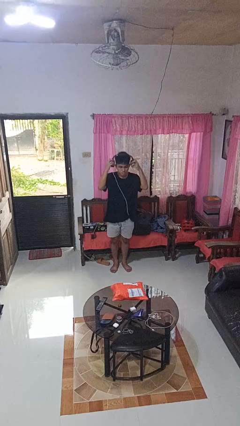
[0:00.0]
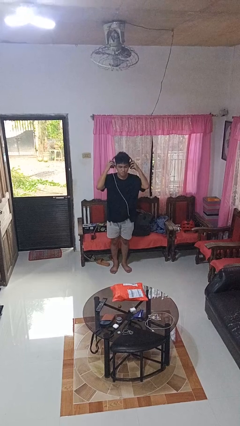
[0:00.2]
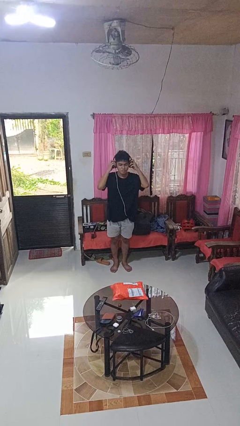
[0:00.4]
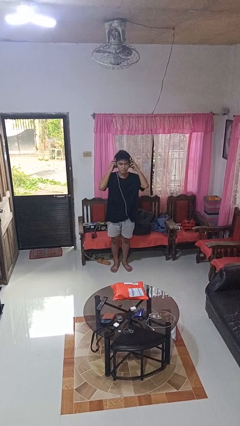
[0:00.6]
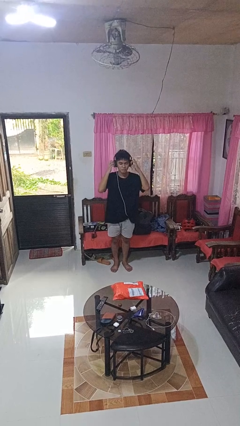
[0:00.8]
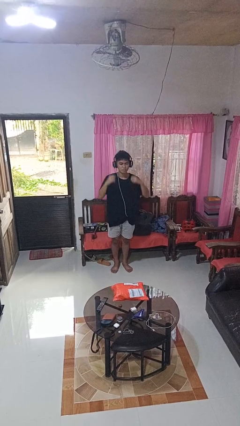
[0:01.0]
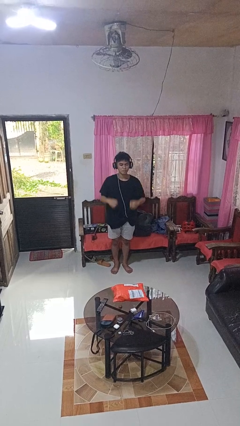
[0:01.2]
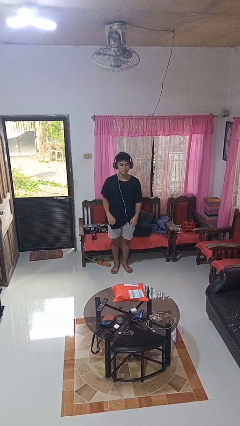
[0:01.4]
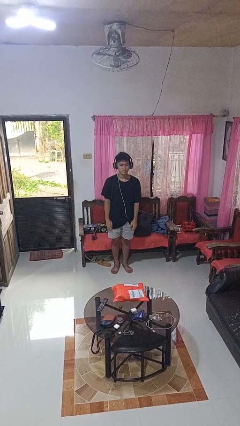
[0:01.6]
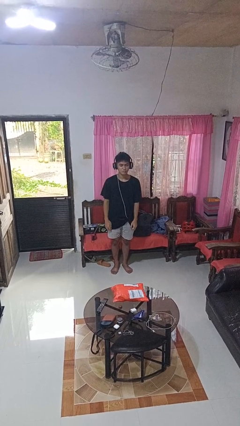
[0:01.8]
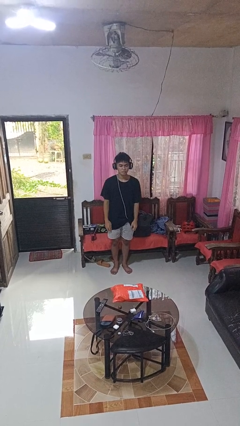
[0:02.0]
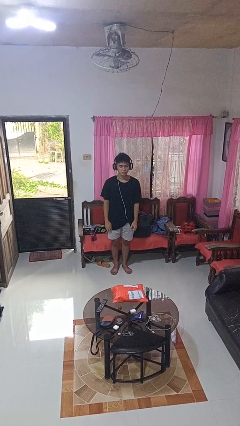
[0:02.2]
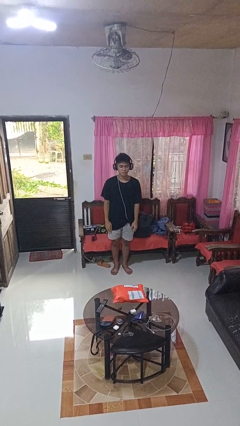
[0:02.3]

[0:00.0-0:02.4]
person puts on headphones

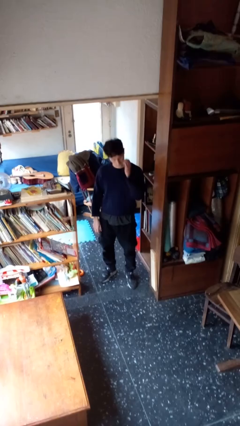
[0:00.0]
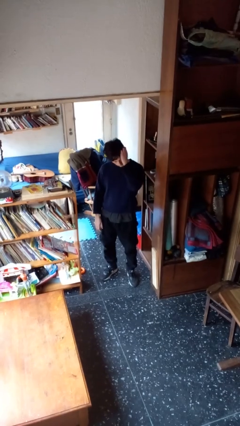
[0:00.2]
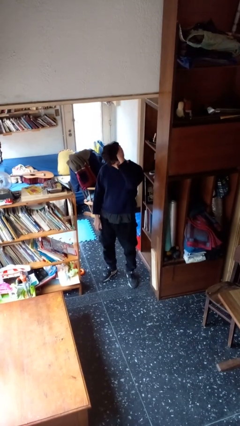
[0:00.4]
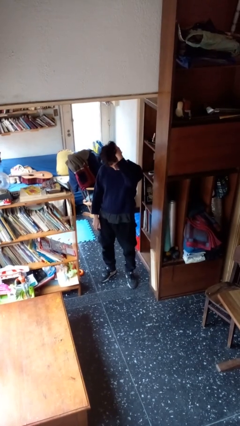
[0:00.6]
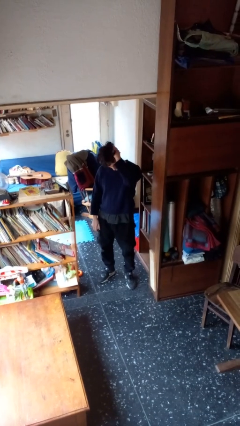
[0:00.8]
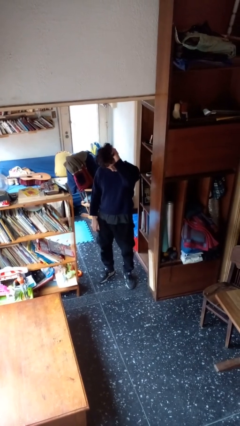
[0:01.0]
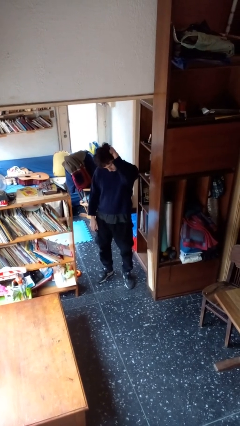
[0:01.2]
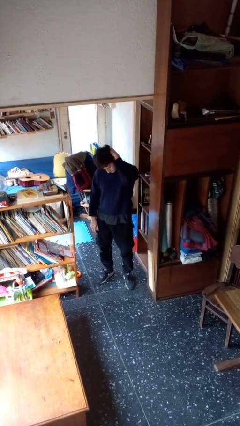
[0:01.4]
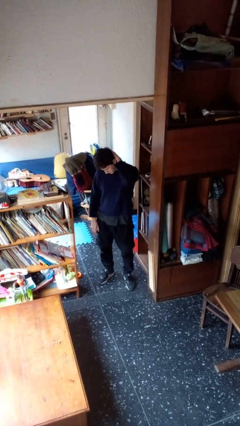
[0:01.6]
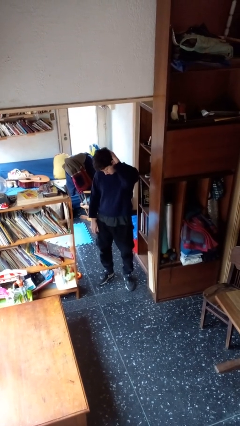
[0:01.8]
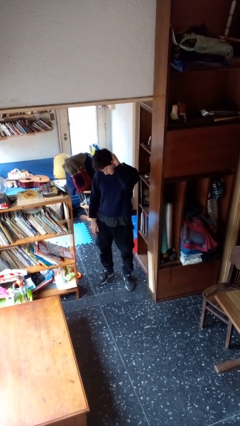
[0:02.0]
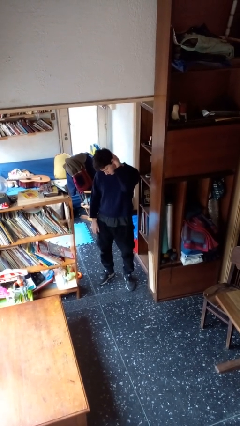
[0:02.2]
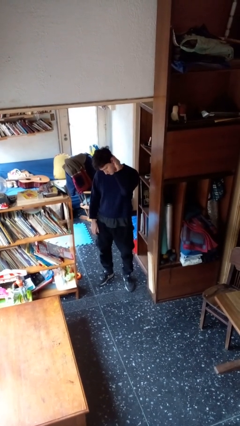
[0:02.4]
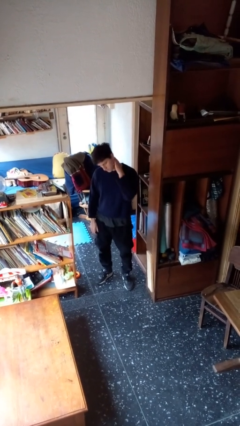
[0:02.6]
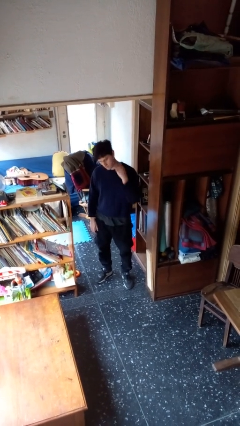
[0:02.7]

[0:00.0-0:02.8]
person pats head

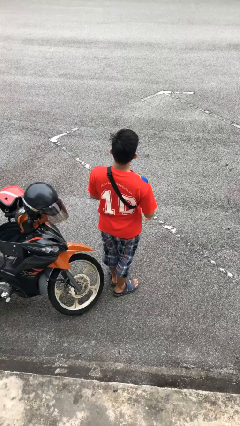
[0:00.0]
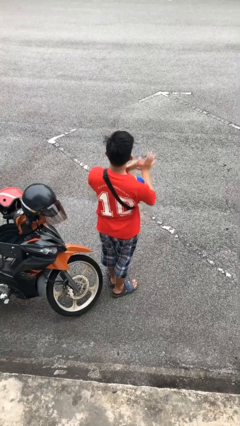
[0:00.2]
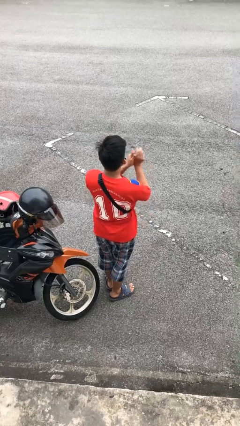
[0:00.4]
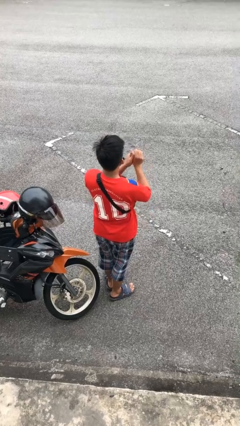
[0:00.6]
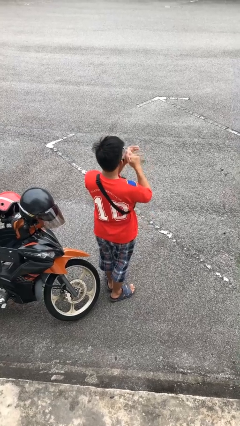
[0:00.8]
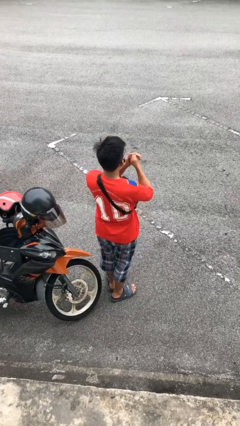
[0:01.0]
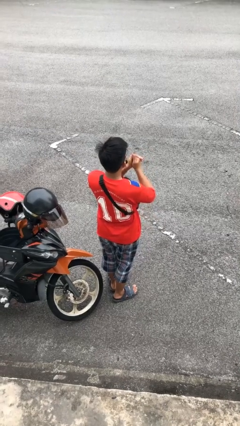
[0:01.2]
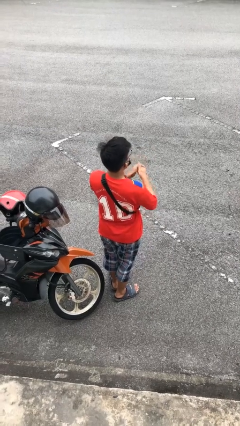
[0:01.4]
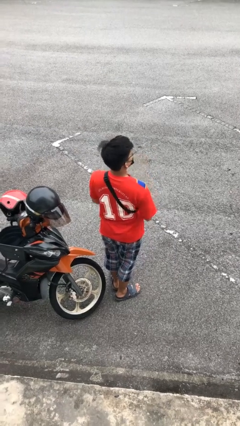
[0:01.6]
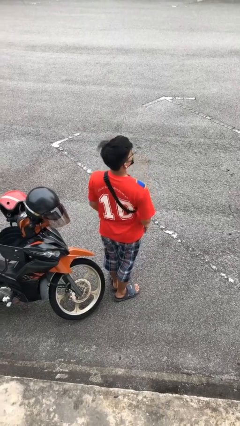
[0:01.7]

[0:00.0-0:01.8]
person cracks knuckles

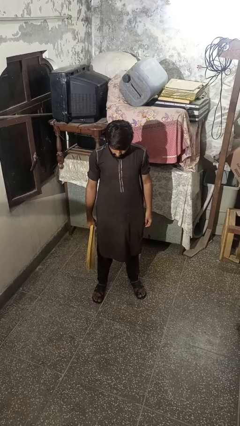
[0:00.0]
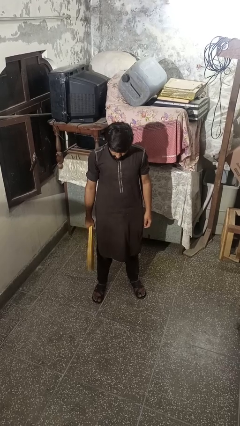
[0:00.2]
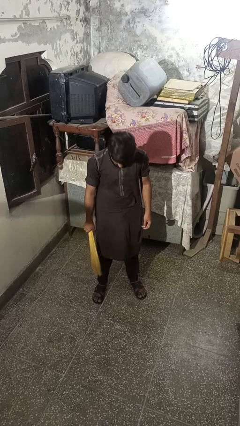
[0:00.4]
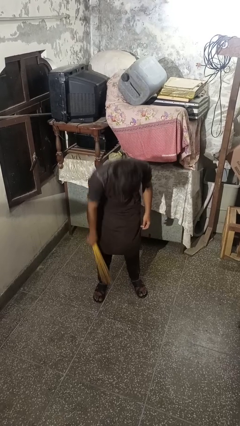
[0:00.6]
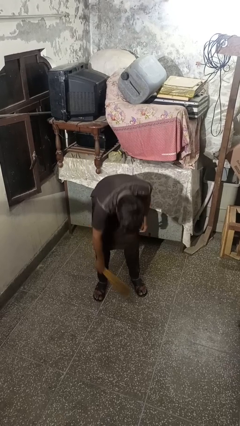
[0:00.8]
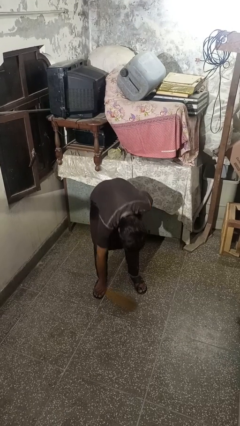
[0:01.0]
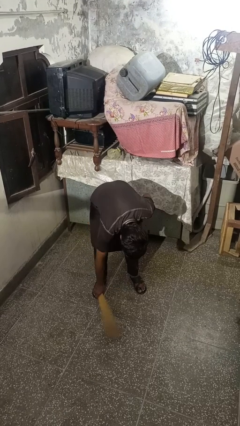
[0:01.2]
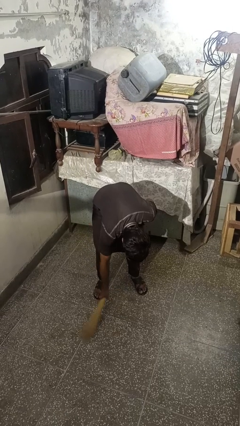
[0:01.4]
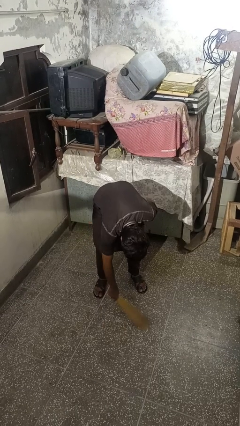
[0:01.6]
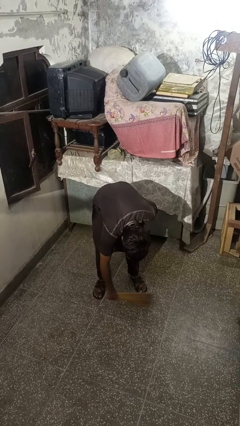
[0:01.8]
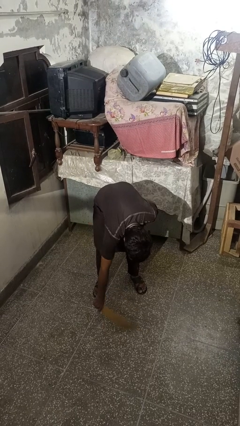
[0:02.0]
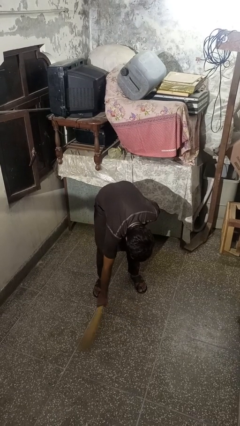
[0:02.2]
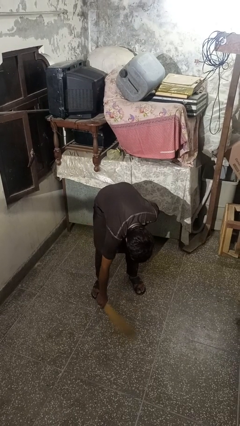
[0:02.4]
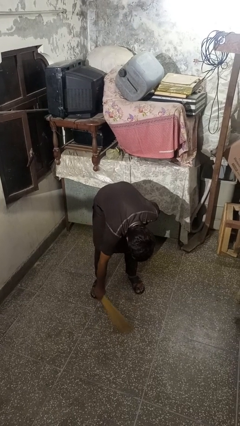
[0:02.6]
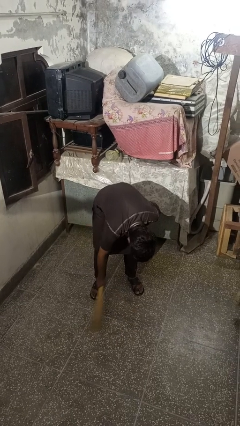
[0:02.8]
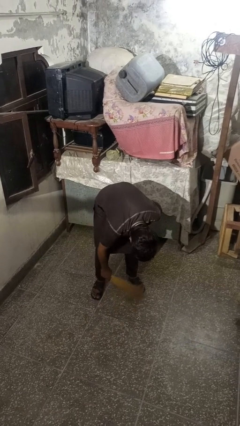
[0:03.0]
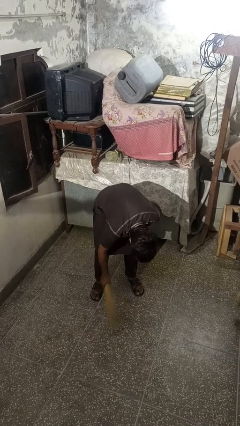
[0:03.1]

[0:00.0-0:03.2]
person sweeps floor

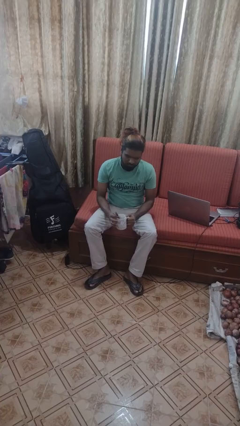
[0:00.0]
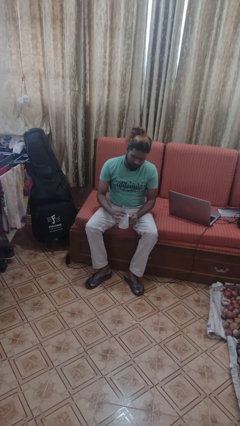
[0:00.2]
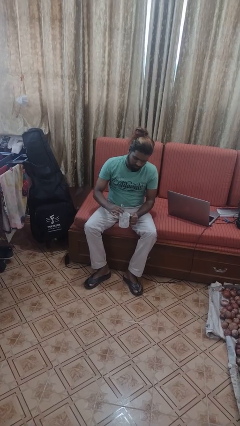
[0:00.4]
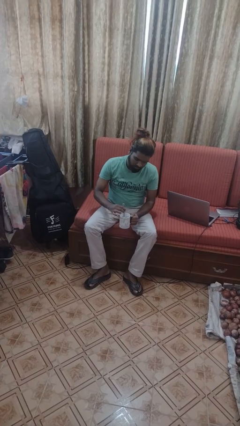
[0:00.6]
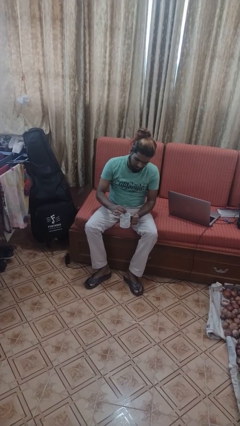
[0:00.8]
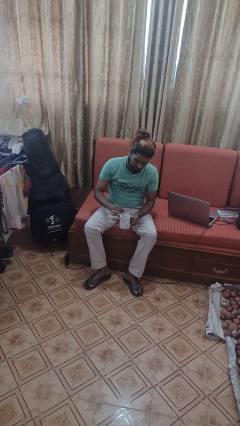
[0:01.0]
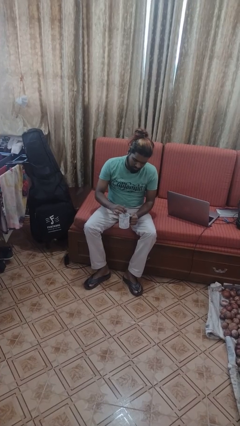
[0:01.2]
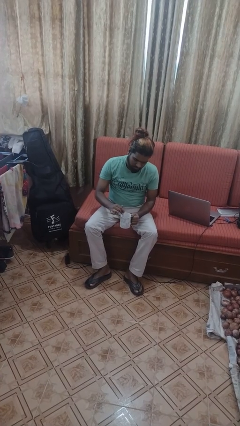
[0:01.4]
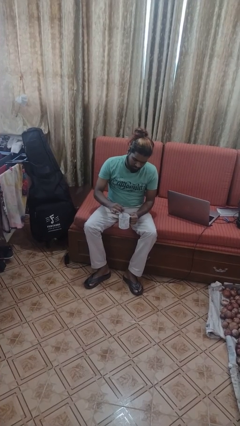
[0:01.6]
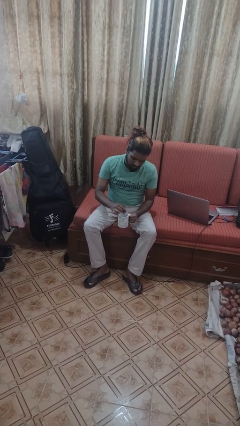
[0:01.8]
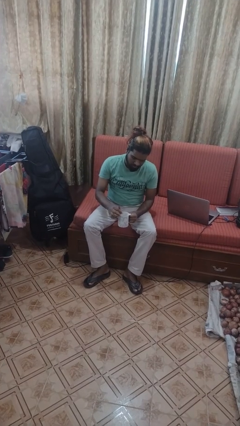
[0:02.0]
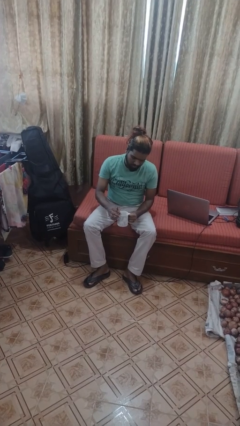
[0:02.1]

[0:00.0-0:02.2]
person stirs mug

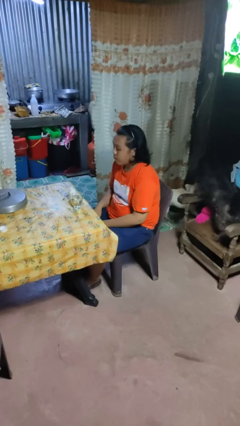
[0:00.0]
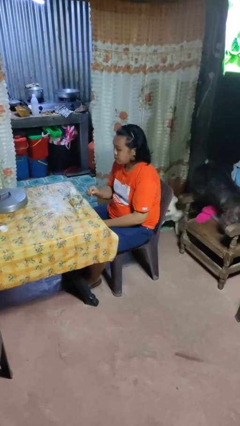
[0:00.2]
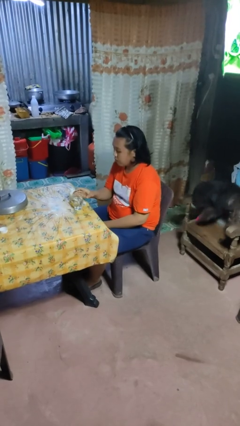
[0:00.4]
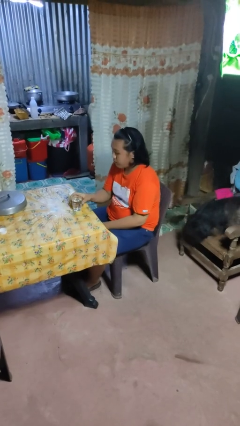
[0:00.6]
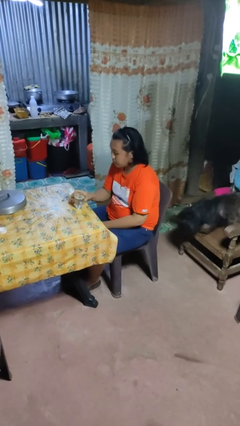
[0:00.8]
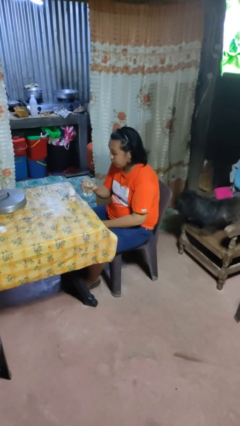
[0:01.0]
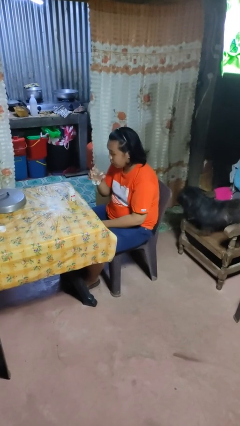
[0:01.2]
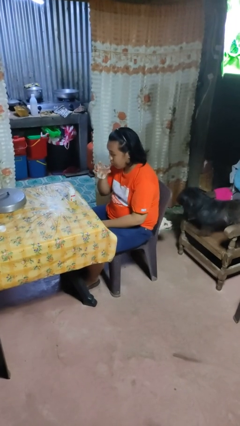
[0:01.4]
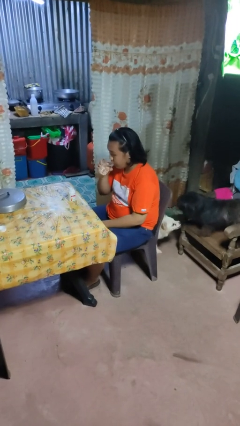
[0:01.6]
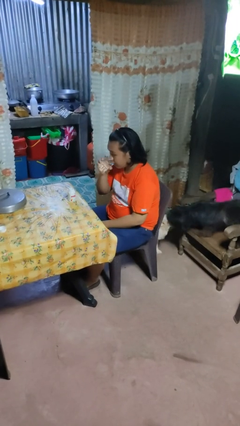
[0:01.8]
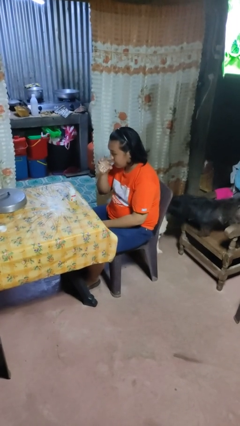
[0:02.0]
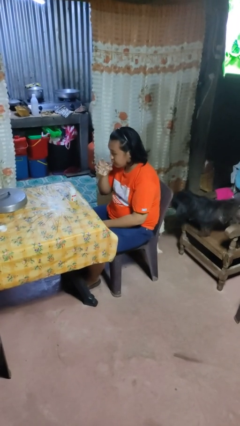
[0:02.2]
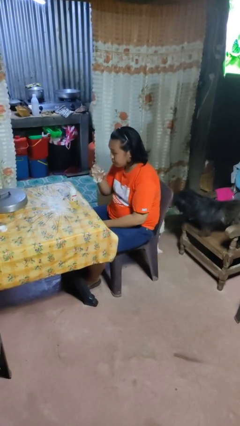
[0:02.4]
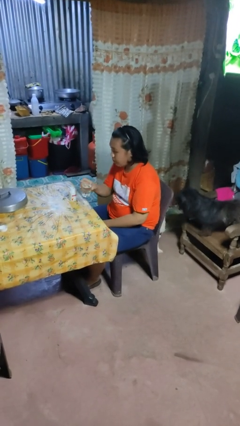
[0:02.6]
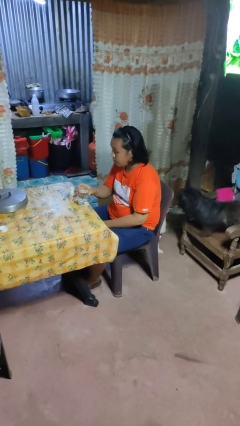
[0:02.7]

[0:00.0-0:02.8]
person drinks from cup

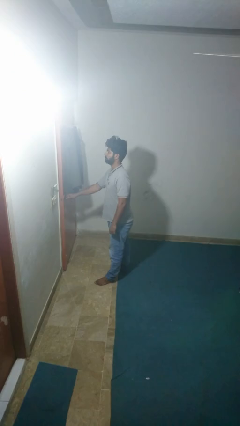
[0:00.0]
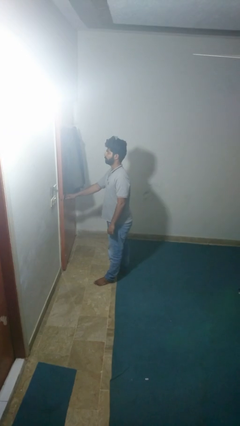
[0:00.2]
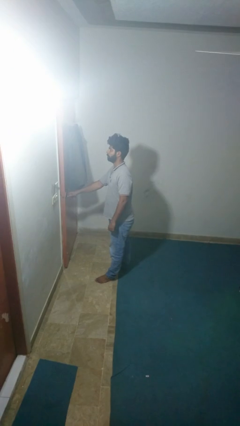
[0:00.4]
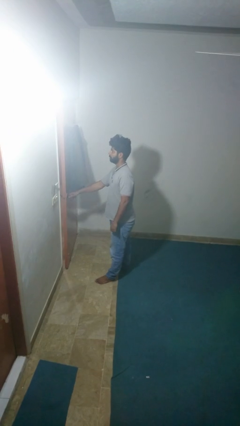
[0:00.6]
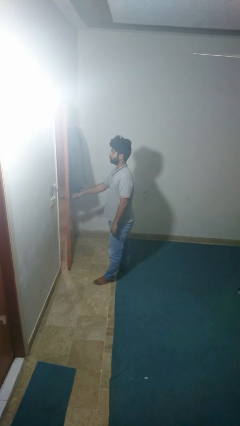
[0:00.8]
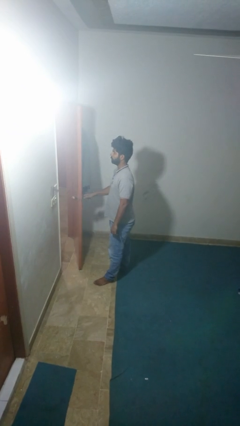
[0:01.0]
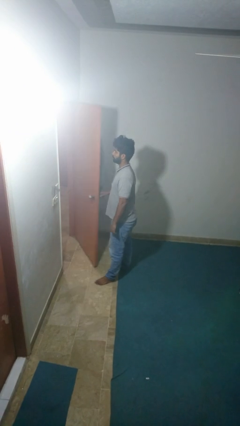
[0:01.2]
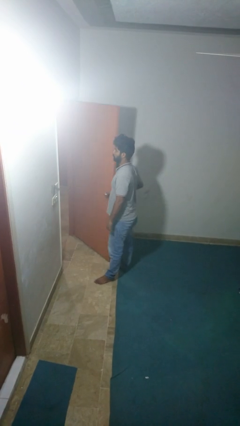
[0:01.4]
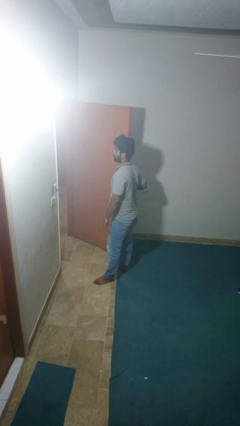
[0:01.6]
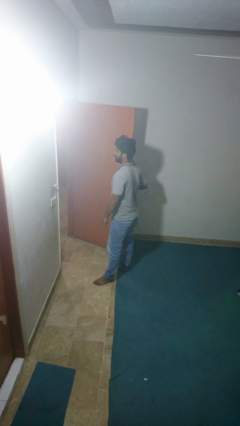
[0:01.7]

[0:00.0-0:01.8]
person opens facility door

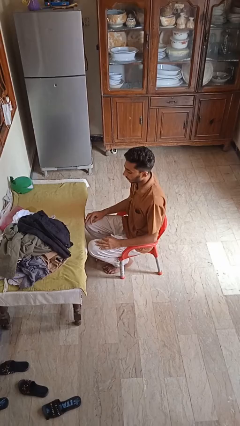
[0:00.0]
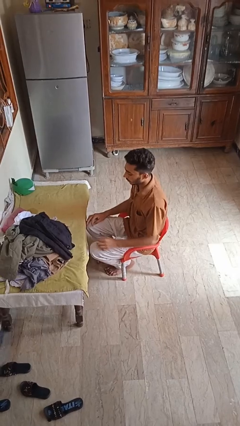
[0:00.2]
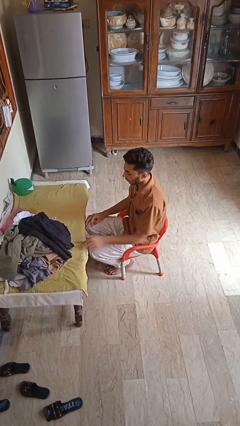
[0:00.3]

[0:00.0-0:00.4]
person folds pants
